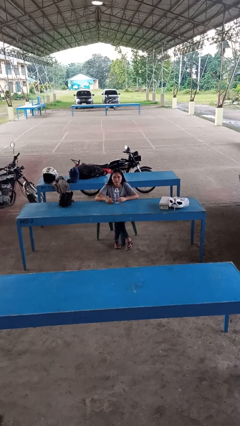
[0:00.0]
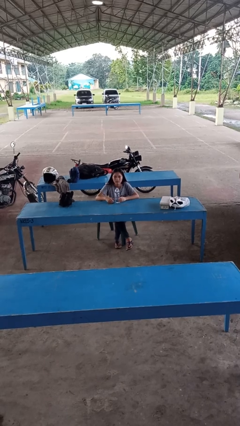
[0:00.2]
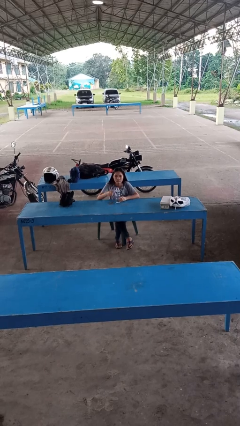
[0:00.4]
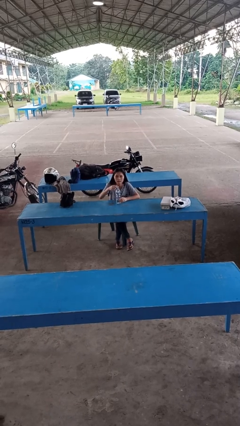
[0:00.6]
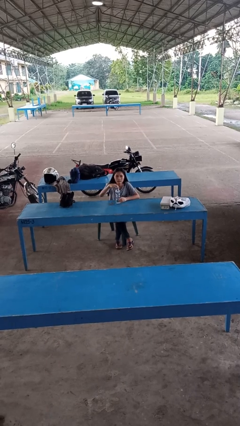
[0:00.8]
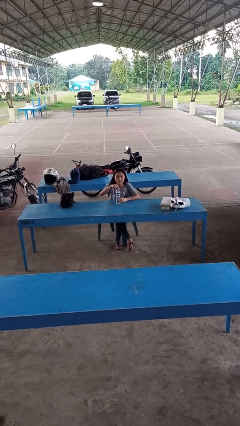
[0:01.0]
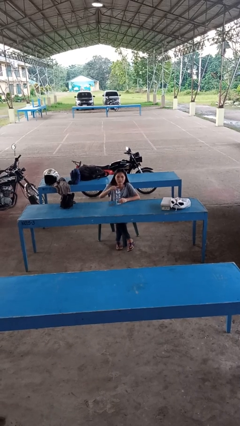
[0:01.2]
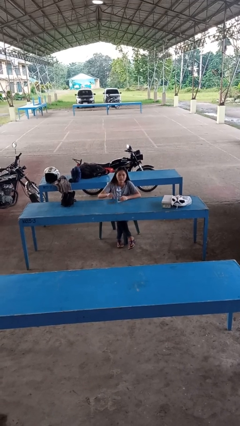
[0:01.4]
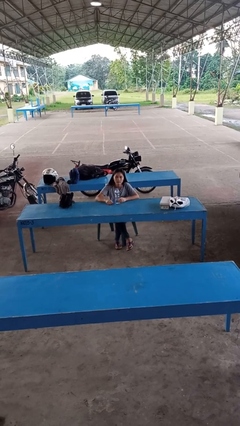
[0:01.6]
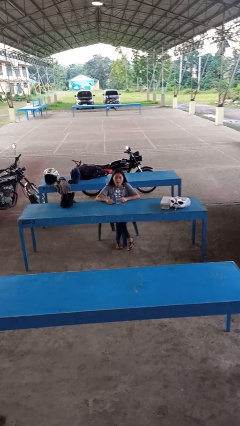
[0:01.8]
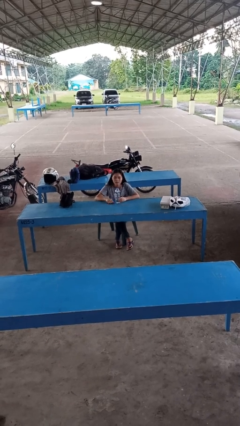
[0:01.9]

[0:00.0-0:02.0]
person screws lid to bottle

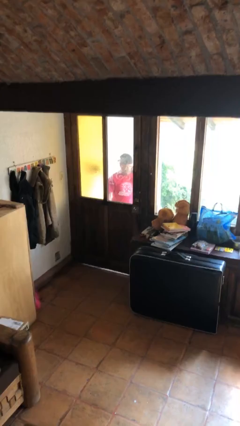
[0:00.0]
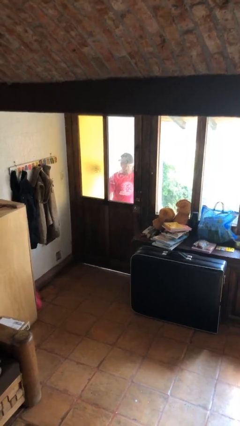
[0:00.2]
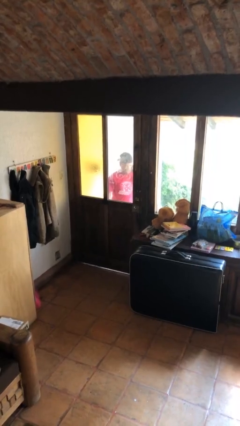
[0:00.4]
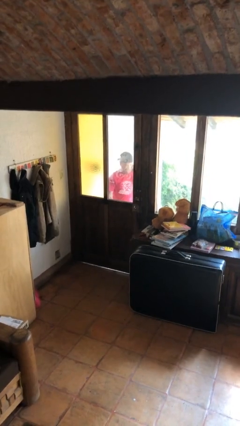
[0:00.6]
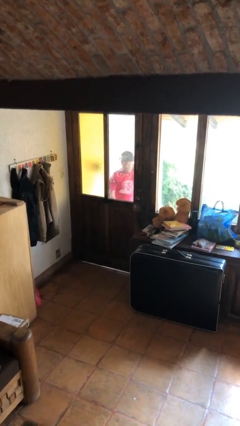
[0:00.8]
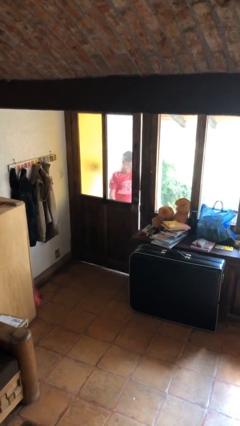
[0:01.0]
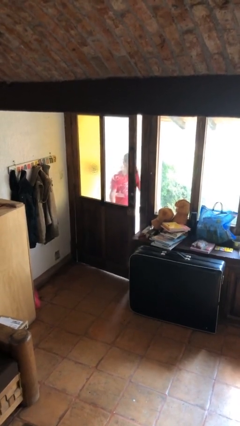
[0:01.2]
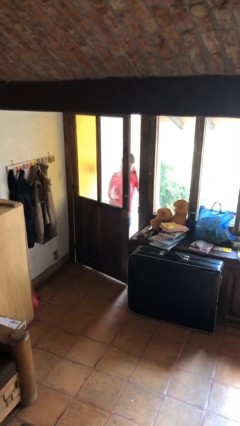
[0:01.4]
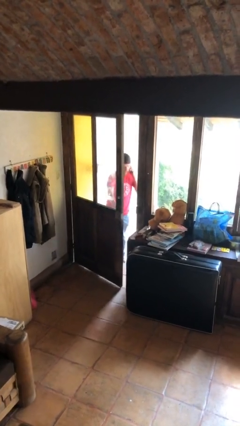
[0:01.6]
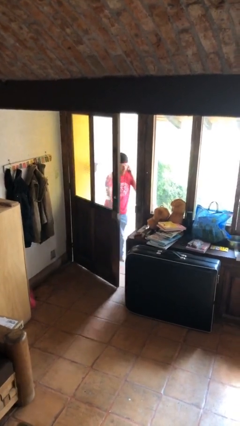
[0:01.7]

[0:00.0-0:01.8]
person opens facility door

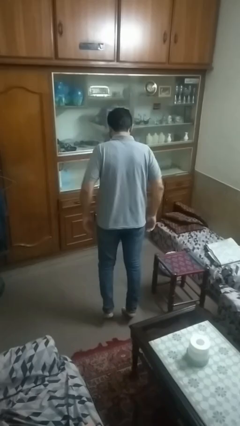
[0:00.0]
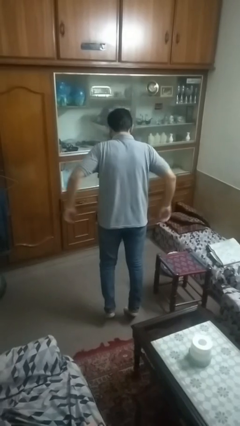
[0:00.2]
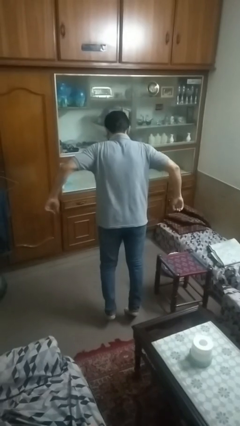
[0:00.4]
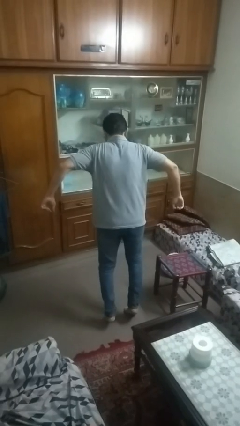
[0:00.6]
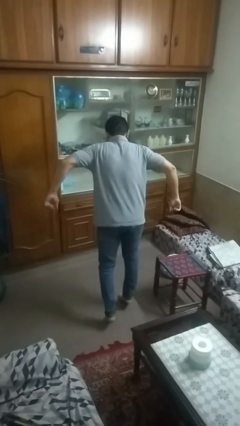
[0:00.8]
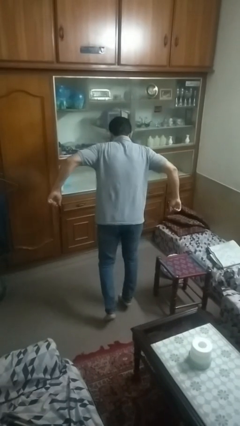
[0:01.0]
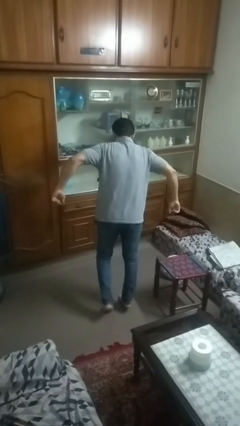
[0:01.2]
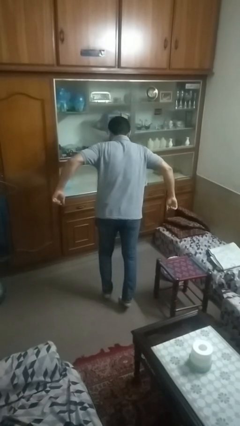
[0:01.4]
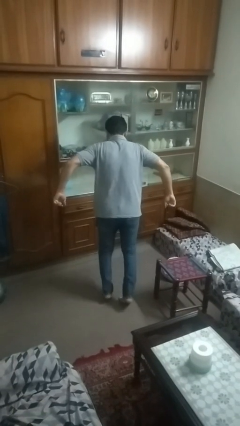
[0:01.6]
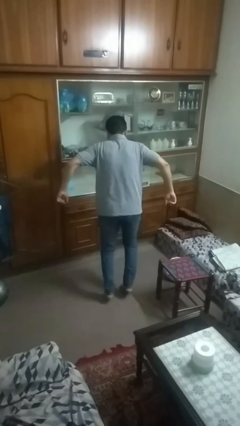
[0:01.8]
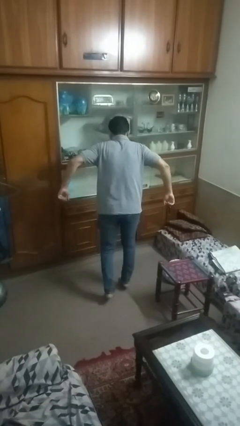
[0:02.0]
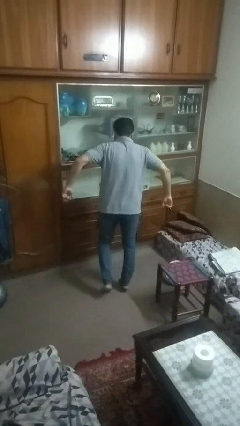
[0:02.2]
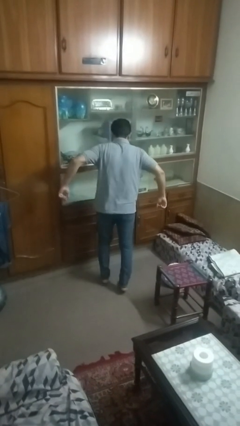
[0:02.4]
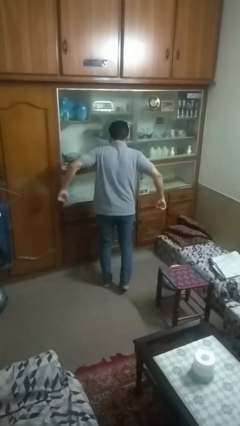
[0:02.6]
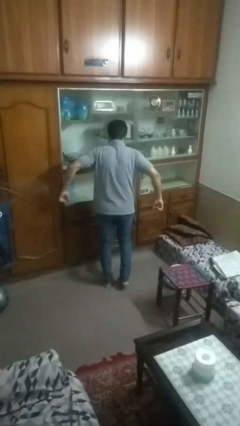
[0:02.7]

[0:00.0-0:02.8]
person walks tiptoe

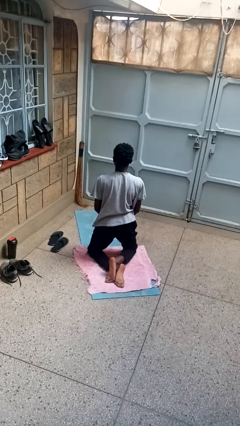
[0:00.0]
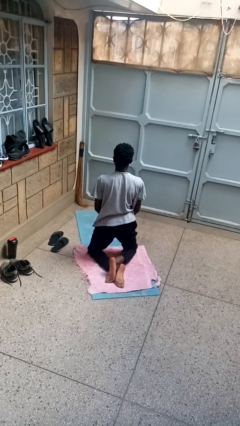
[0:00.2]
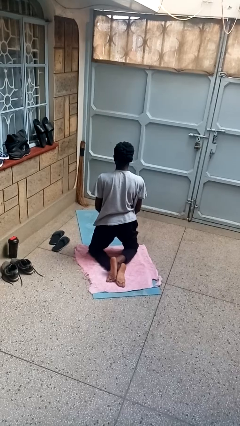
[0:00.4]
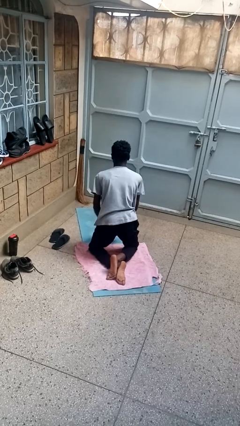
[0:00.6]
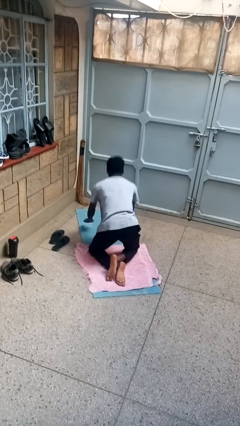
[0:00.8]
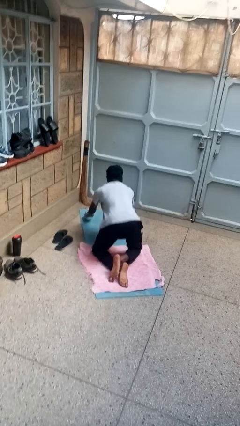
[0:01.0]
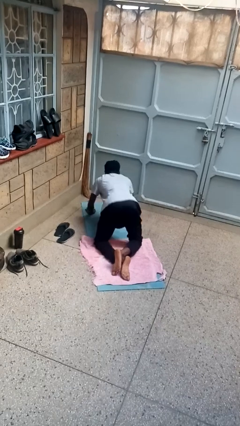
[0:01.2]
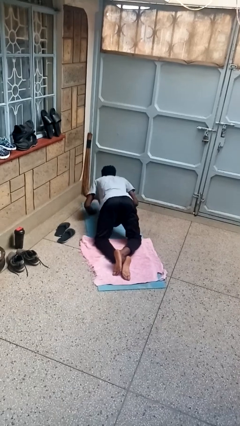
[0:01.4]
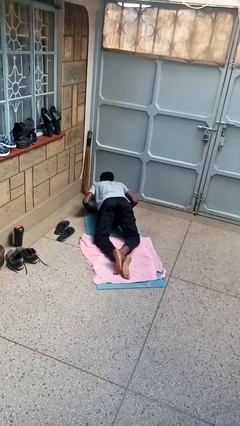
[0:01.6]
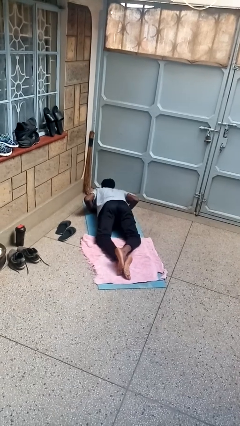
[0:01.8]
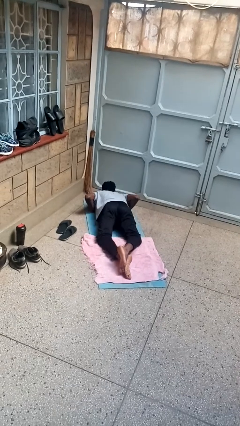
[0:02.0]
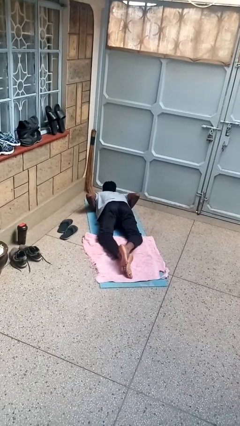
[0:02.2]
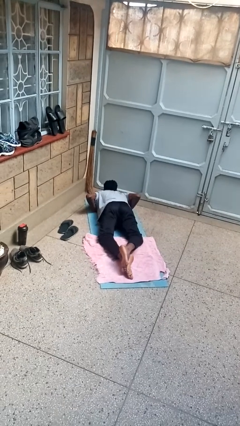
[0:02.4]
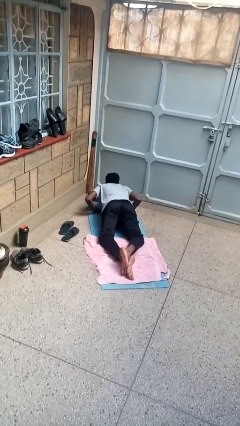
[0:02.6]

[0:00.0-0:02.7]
person exercises with pushup

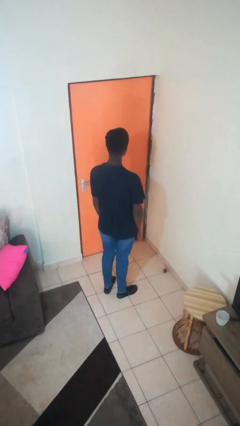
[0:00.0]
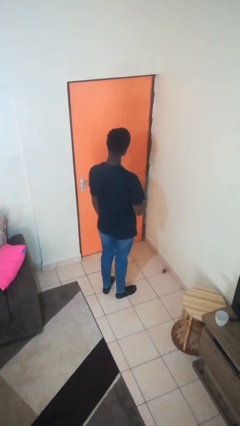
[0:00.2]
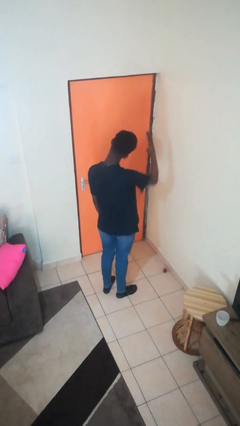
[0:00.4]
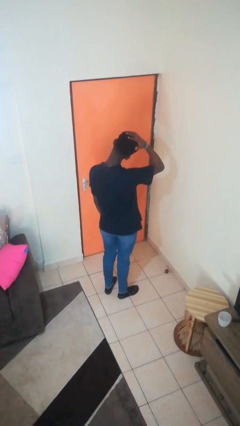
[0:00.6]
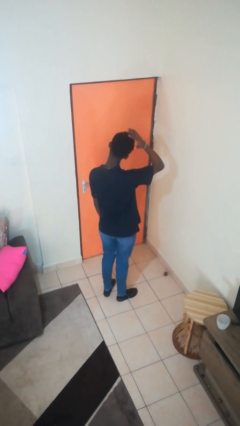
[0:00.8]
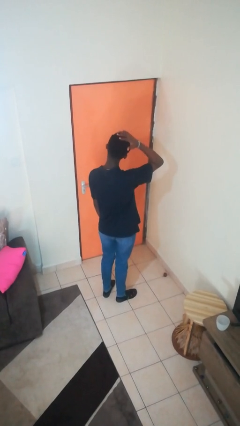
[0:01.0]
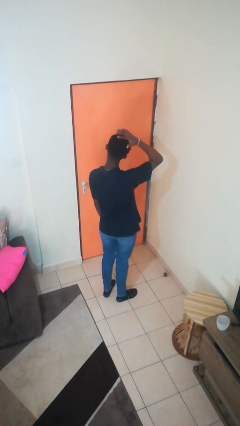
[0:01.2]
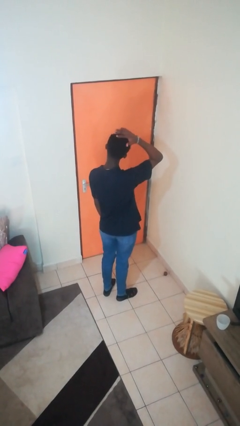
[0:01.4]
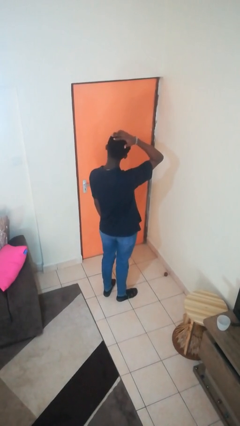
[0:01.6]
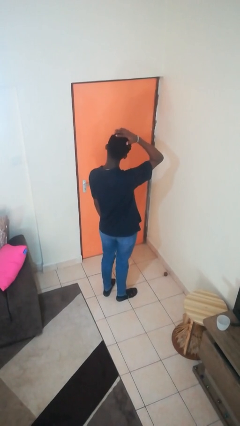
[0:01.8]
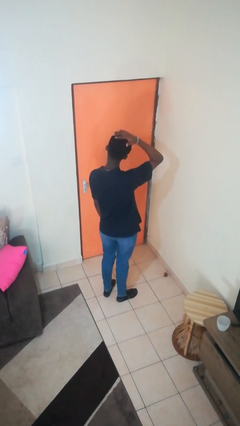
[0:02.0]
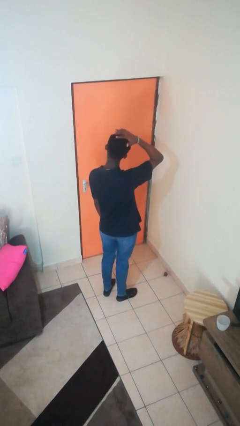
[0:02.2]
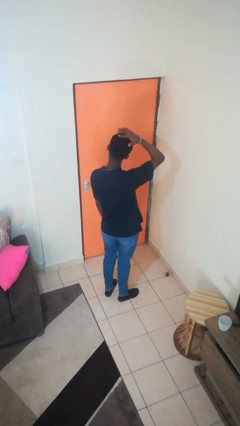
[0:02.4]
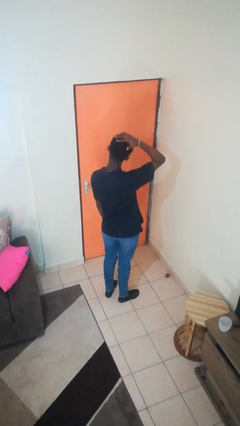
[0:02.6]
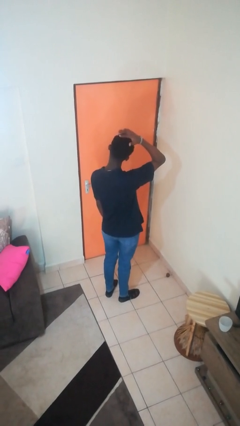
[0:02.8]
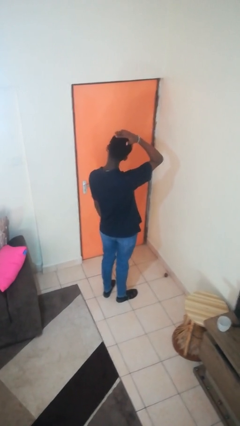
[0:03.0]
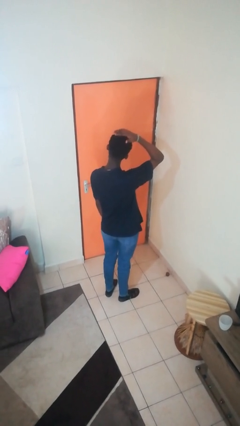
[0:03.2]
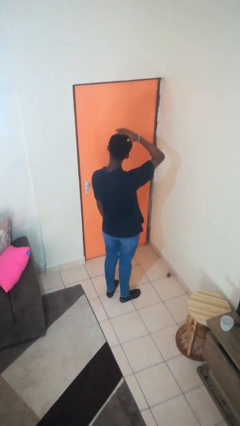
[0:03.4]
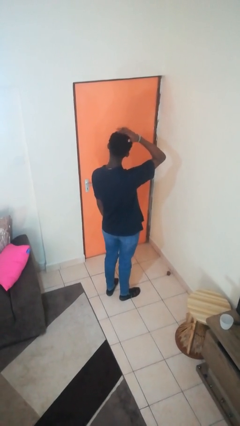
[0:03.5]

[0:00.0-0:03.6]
person pats head

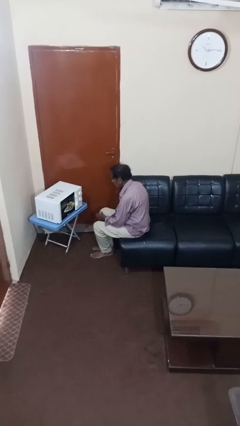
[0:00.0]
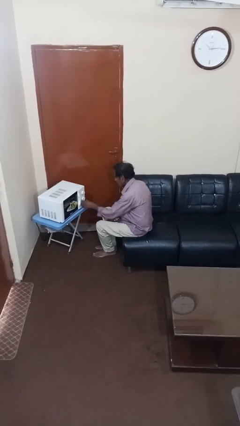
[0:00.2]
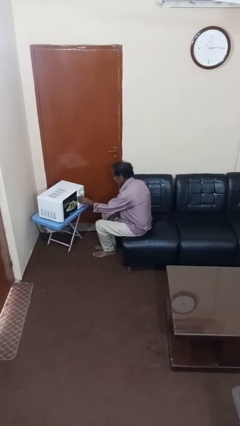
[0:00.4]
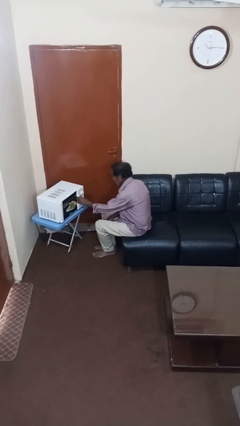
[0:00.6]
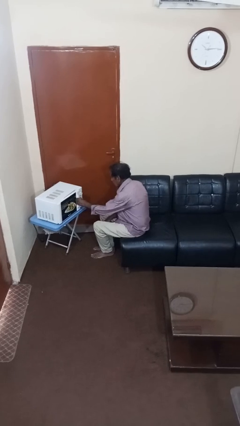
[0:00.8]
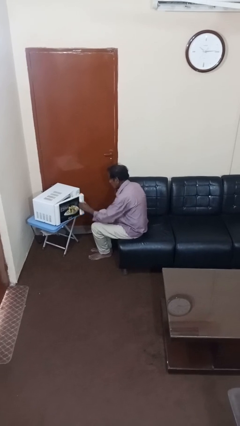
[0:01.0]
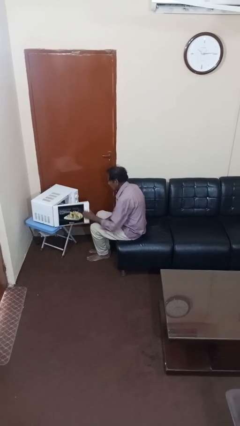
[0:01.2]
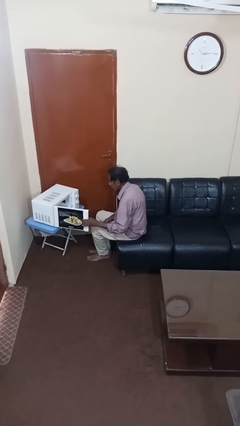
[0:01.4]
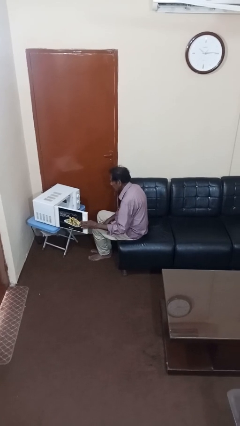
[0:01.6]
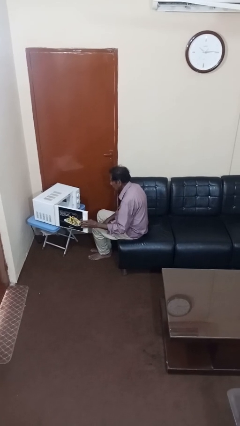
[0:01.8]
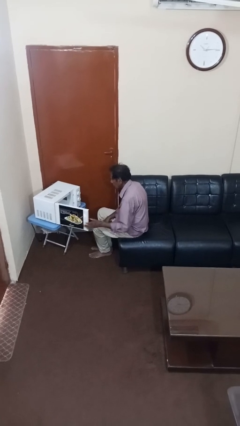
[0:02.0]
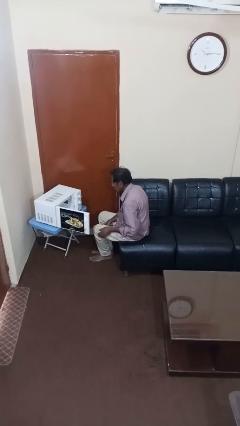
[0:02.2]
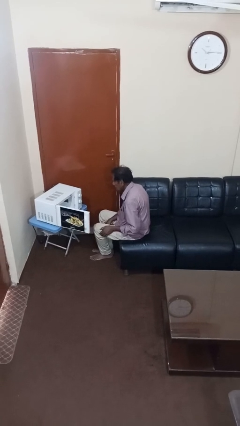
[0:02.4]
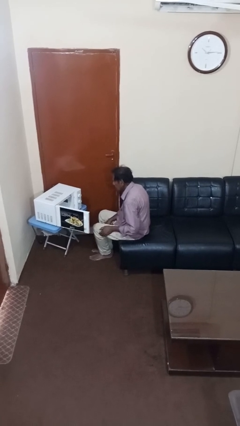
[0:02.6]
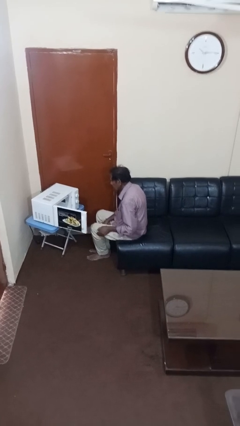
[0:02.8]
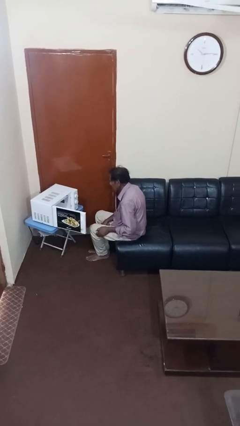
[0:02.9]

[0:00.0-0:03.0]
person opens microwave

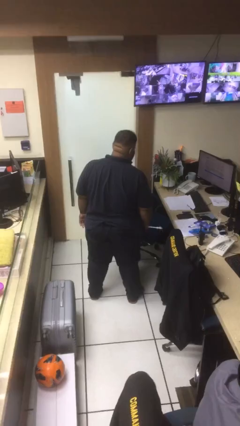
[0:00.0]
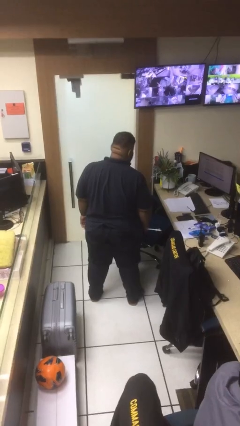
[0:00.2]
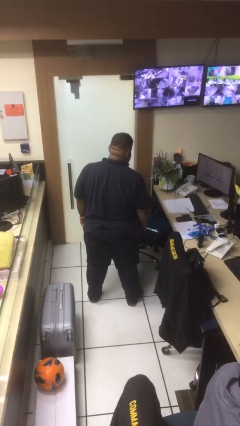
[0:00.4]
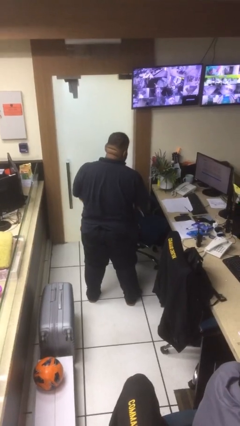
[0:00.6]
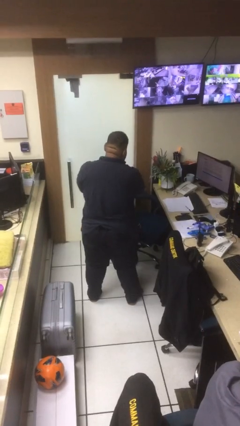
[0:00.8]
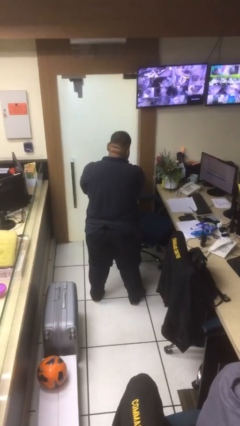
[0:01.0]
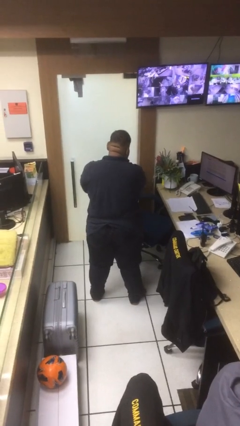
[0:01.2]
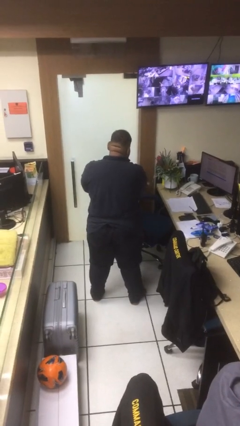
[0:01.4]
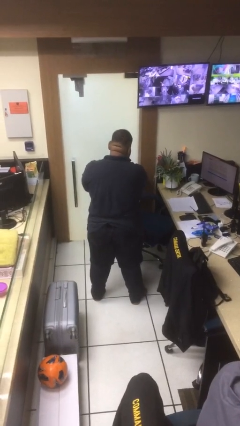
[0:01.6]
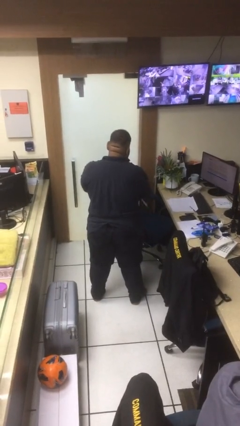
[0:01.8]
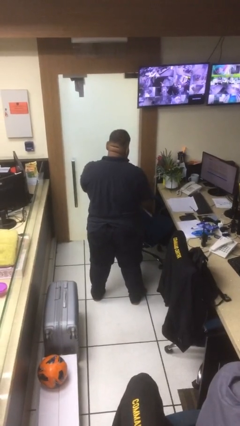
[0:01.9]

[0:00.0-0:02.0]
person dusts furniture
